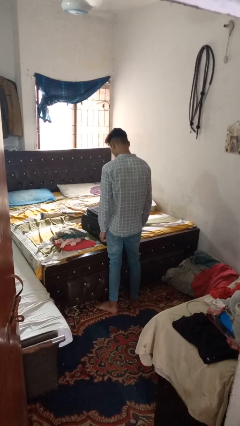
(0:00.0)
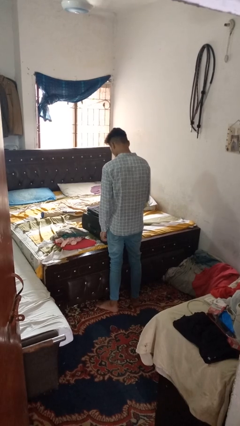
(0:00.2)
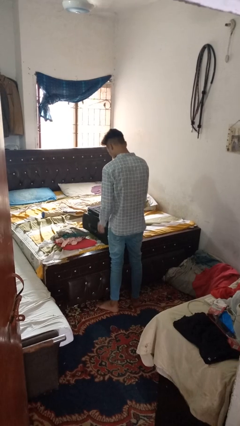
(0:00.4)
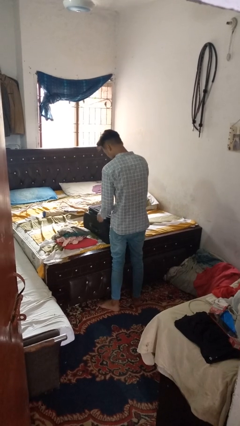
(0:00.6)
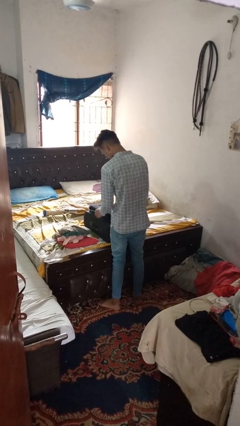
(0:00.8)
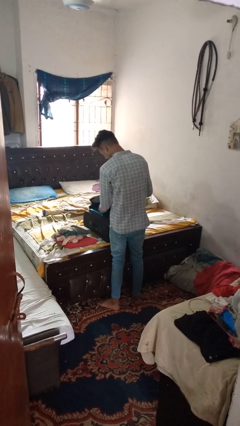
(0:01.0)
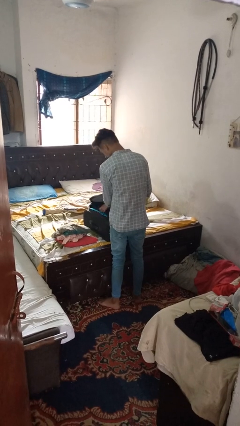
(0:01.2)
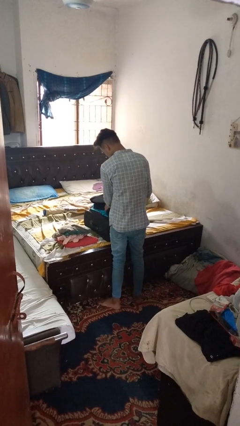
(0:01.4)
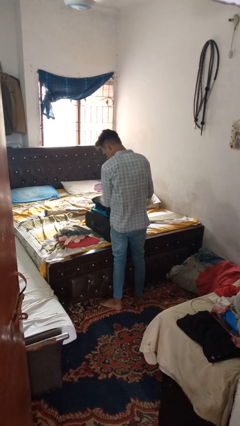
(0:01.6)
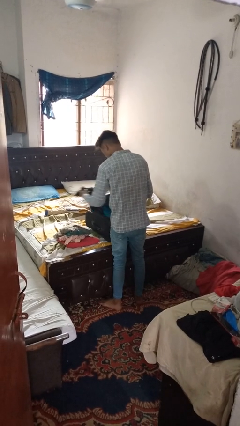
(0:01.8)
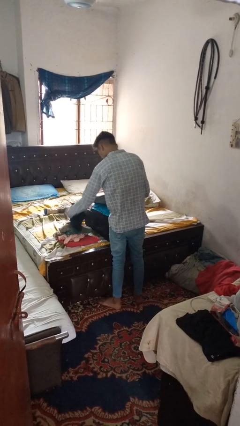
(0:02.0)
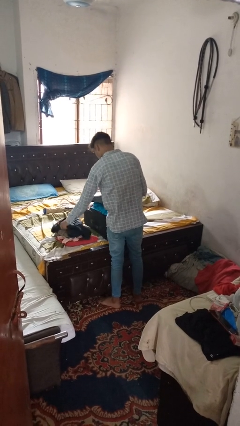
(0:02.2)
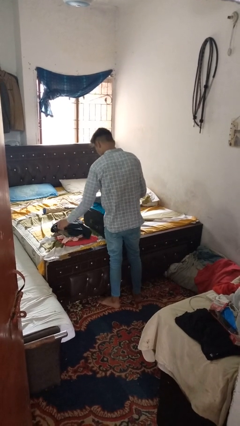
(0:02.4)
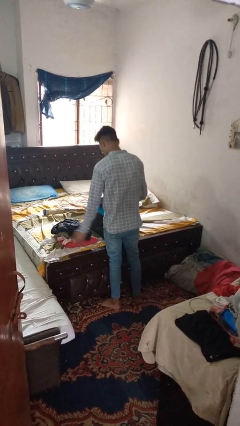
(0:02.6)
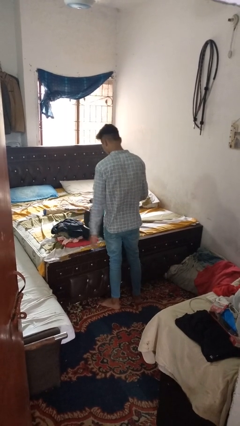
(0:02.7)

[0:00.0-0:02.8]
person unloads clothes from suitcase

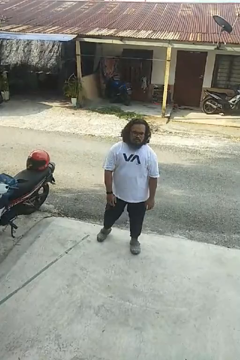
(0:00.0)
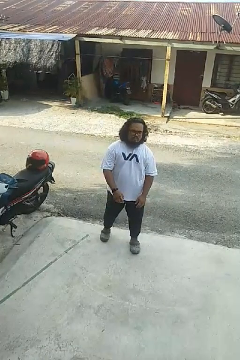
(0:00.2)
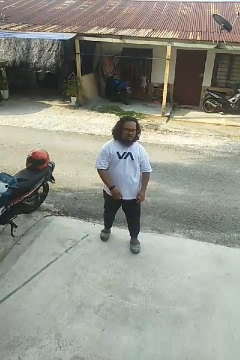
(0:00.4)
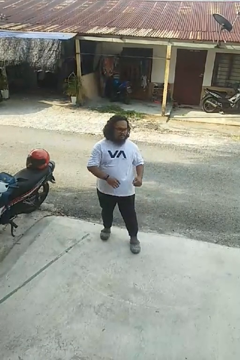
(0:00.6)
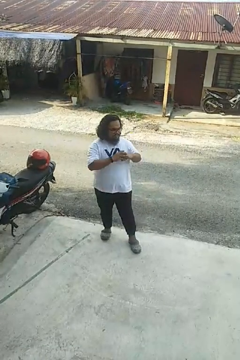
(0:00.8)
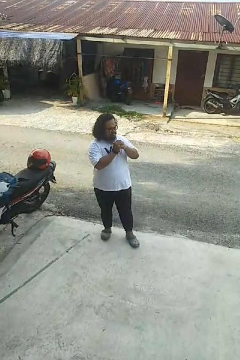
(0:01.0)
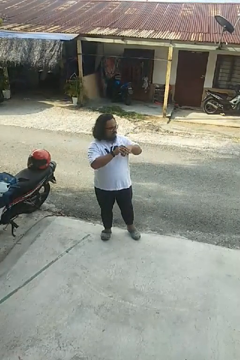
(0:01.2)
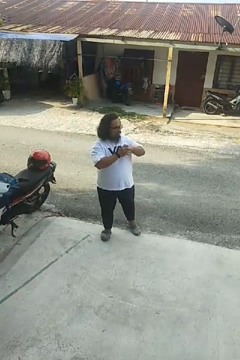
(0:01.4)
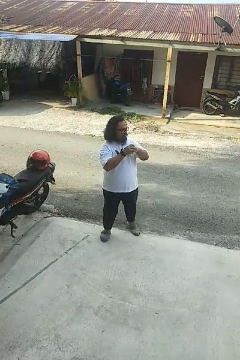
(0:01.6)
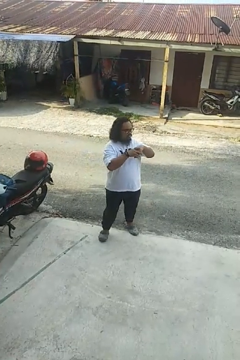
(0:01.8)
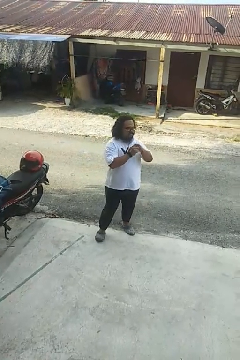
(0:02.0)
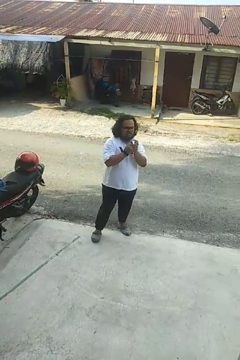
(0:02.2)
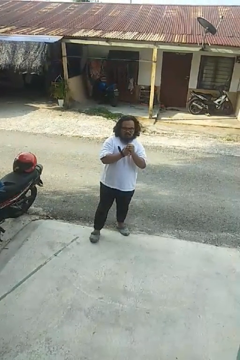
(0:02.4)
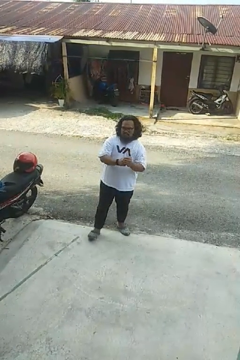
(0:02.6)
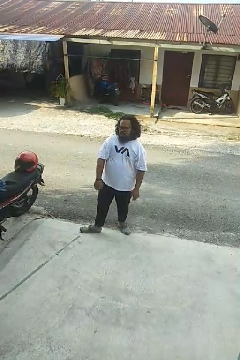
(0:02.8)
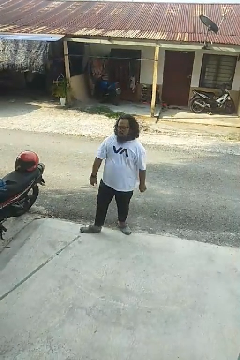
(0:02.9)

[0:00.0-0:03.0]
person cracks knuckles

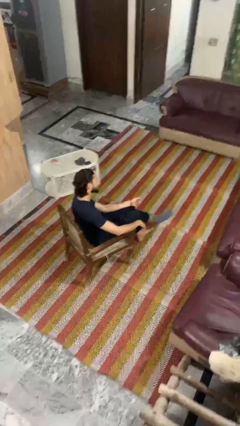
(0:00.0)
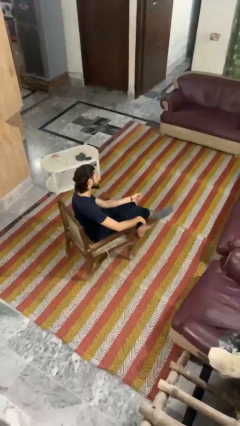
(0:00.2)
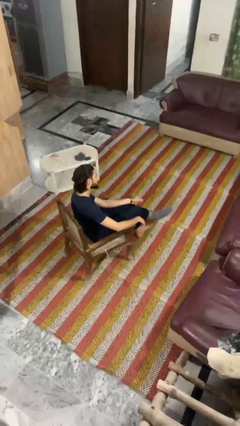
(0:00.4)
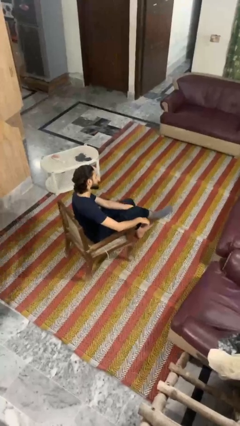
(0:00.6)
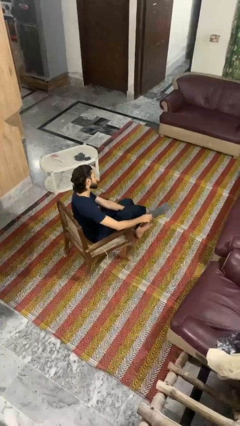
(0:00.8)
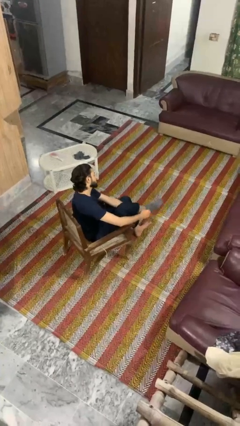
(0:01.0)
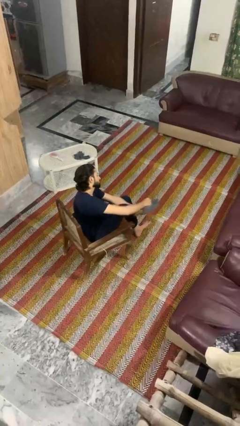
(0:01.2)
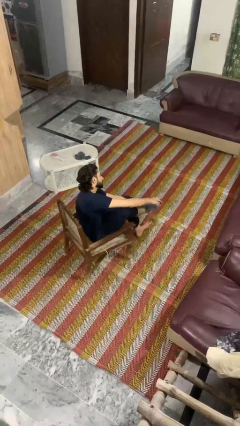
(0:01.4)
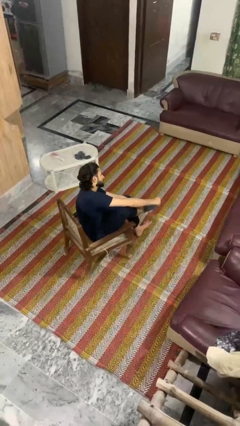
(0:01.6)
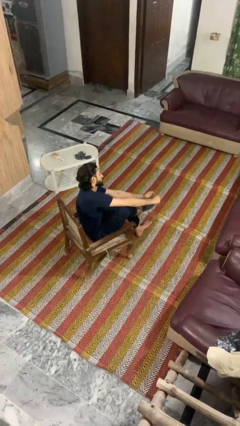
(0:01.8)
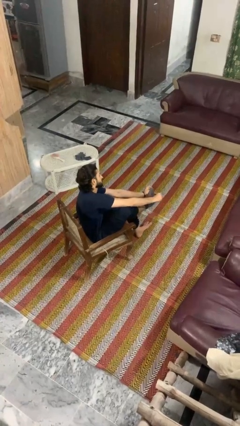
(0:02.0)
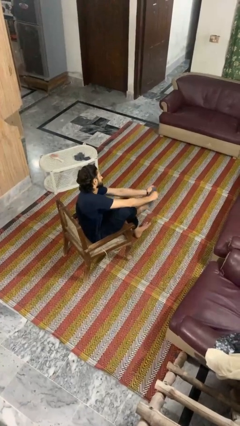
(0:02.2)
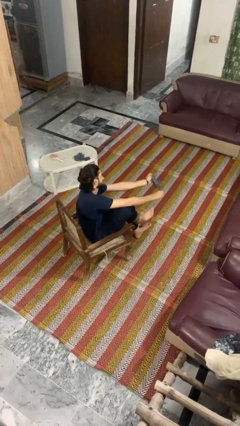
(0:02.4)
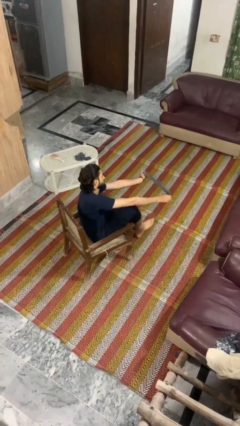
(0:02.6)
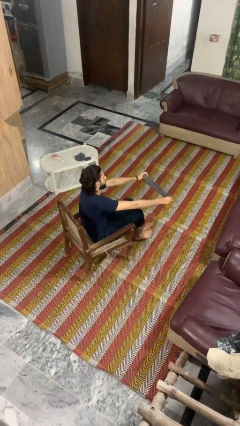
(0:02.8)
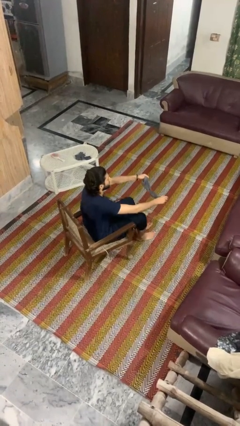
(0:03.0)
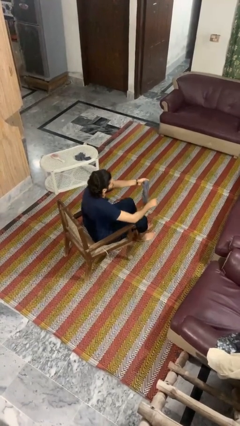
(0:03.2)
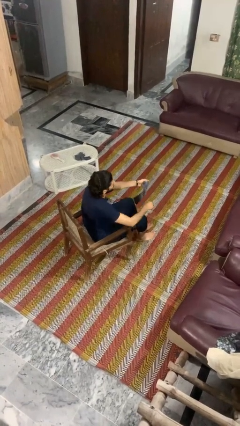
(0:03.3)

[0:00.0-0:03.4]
person takes off socks

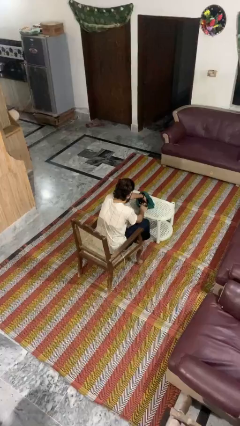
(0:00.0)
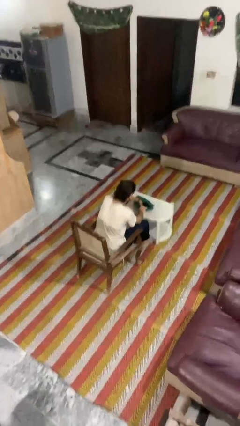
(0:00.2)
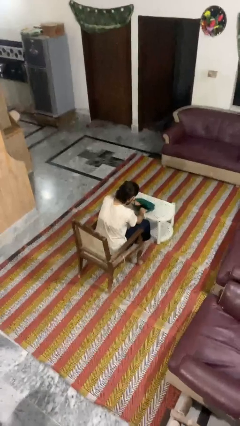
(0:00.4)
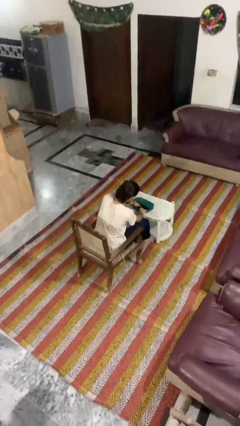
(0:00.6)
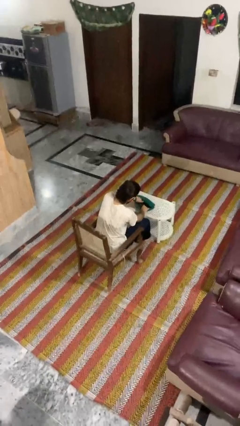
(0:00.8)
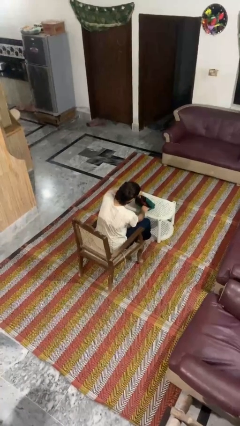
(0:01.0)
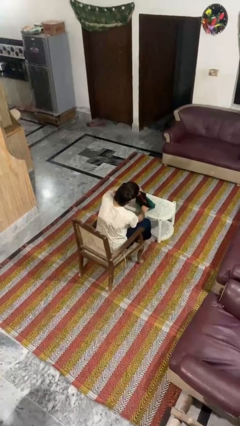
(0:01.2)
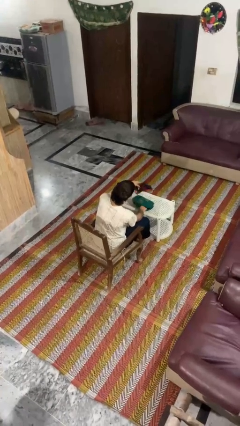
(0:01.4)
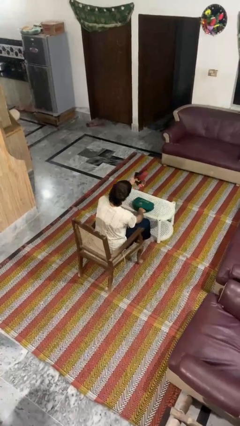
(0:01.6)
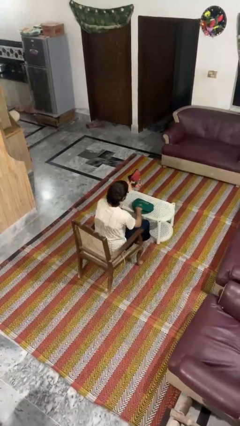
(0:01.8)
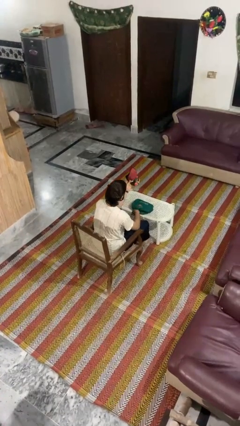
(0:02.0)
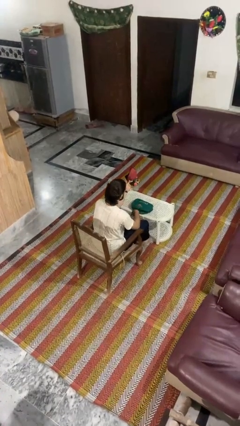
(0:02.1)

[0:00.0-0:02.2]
person takes object from purse

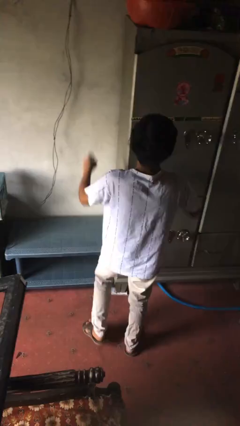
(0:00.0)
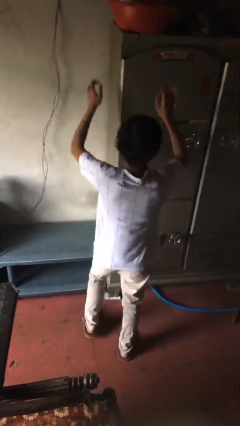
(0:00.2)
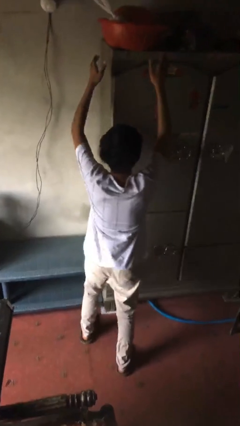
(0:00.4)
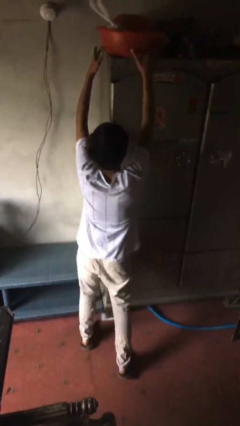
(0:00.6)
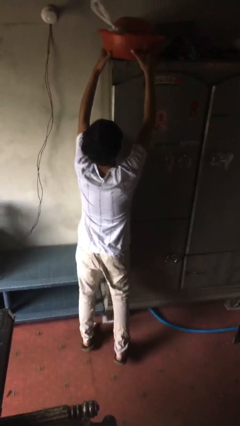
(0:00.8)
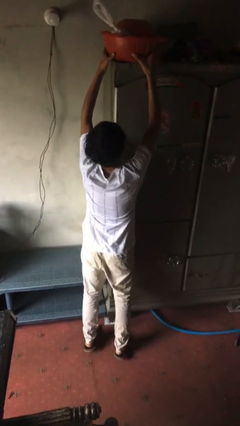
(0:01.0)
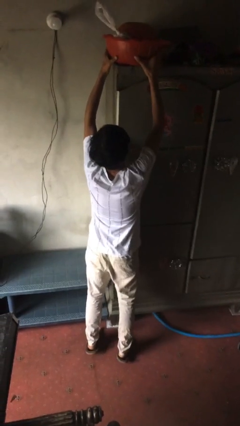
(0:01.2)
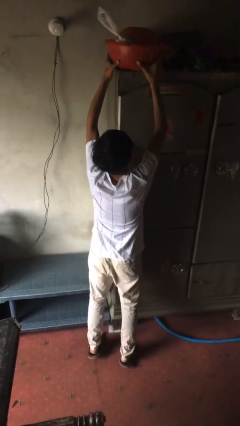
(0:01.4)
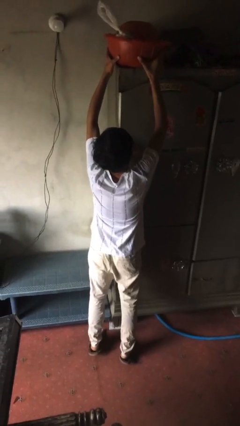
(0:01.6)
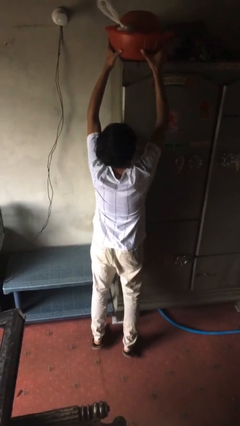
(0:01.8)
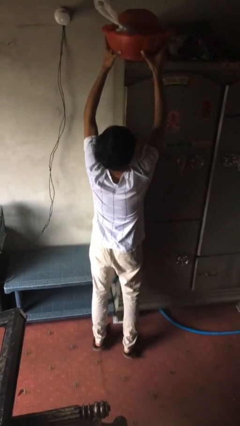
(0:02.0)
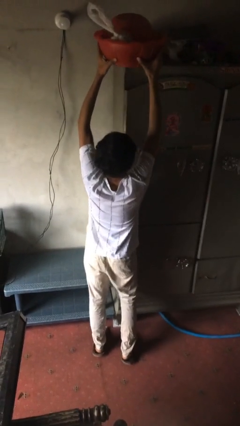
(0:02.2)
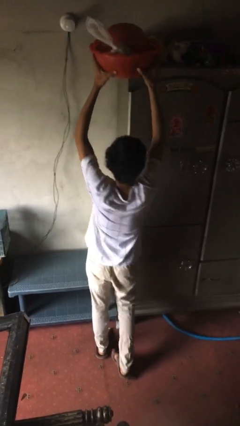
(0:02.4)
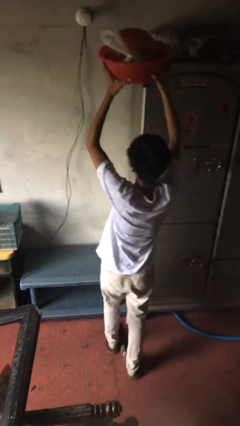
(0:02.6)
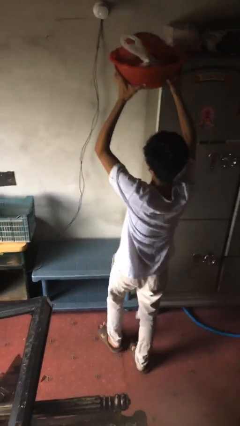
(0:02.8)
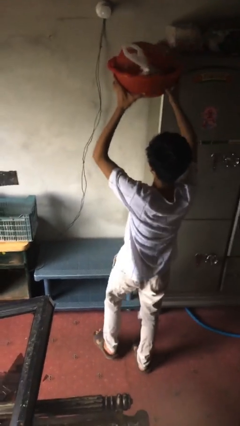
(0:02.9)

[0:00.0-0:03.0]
person picks up object from shelf

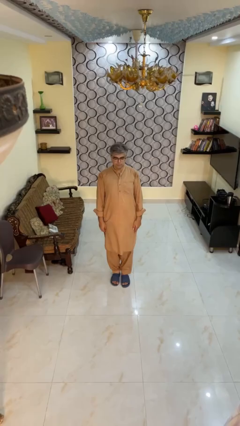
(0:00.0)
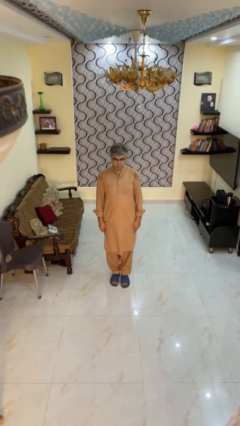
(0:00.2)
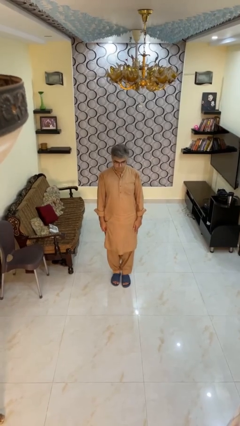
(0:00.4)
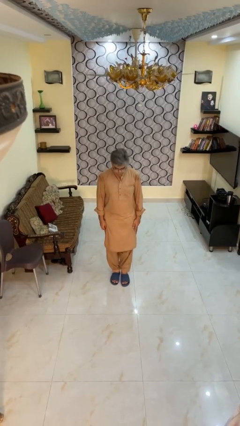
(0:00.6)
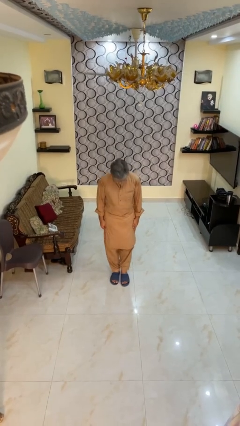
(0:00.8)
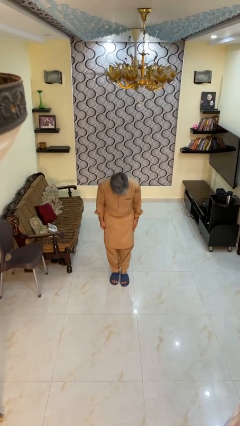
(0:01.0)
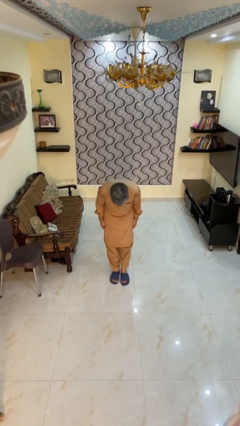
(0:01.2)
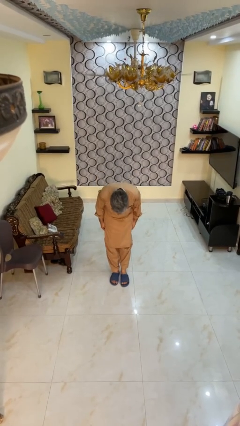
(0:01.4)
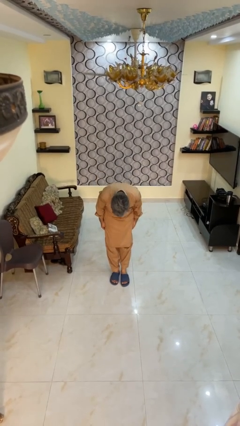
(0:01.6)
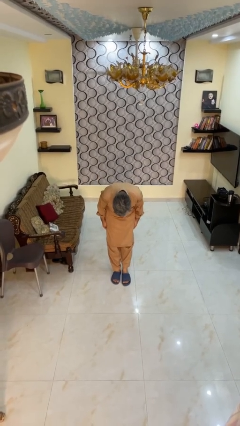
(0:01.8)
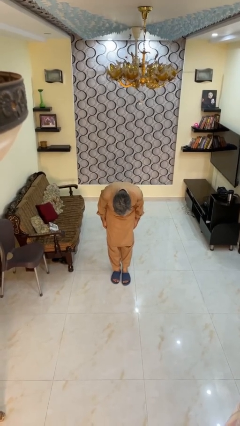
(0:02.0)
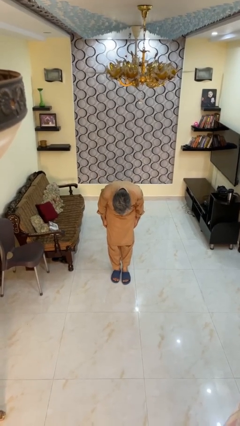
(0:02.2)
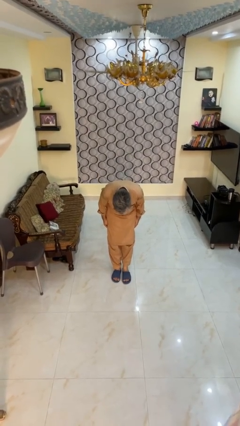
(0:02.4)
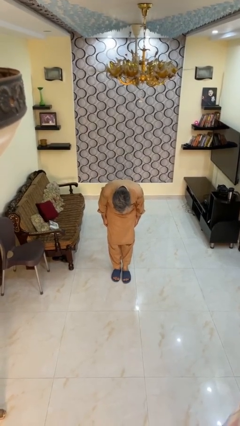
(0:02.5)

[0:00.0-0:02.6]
person bows

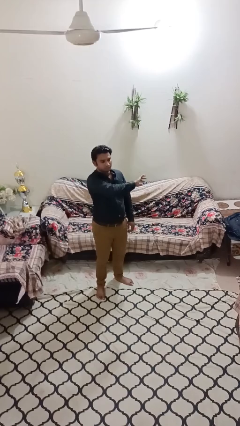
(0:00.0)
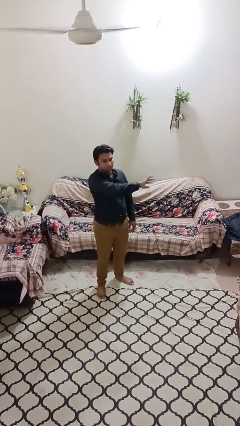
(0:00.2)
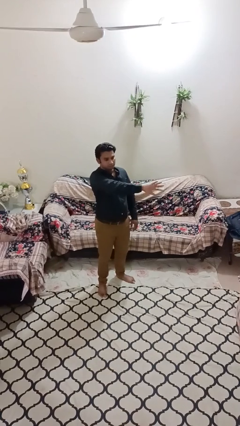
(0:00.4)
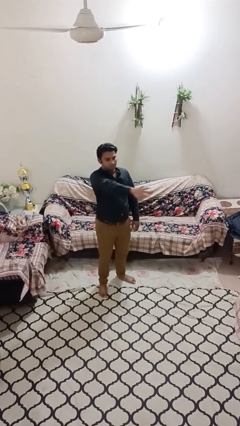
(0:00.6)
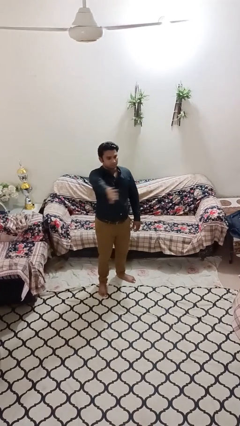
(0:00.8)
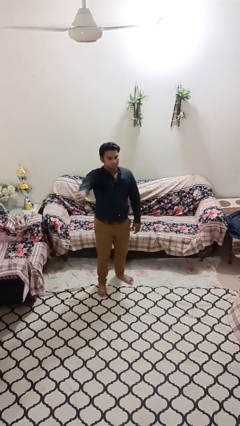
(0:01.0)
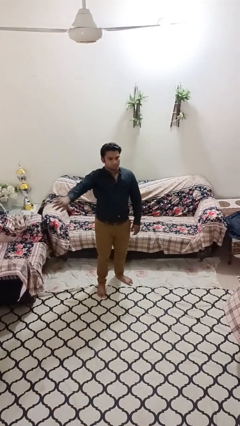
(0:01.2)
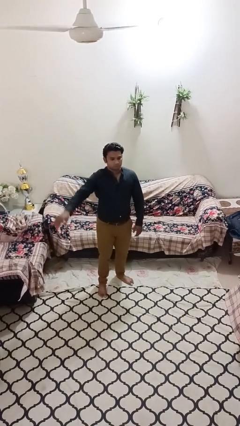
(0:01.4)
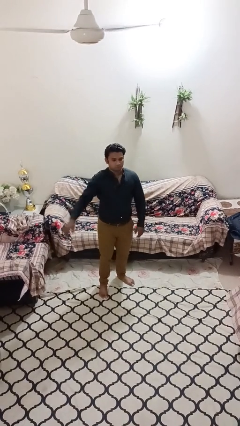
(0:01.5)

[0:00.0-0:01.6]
person gestures swipe right
